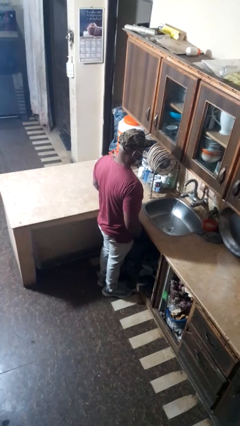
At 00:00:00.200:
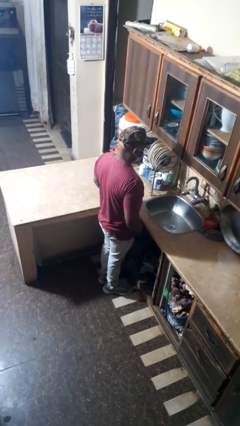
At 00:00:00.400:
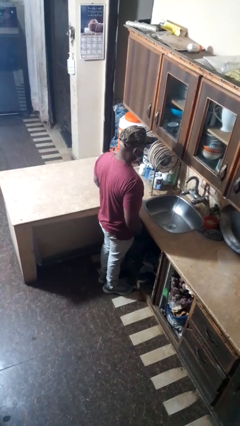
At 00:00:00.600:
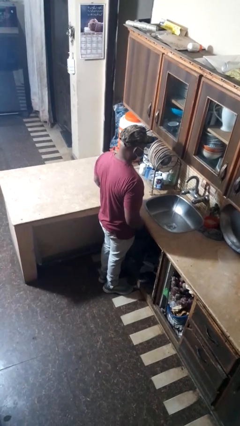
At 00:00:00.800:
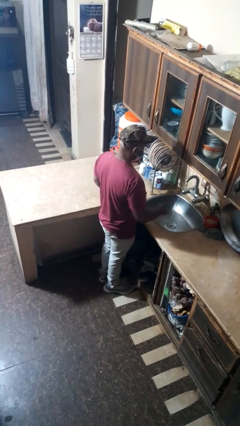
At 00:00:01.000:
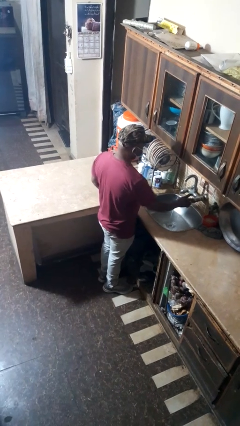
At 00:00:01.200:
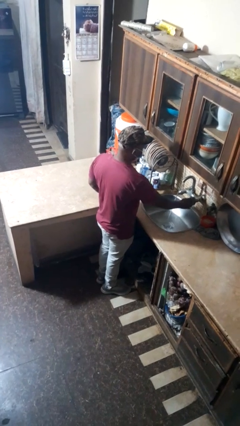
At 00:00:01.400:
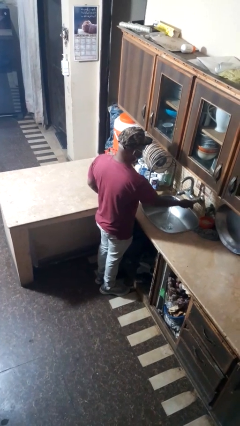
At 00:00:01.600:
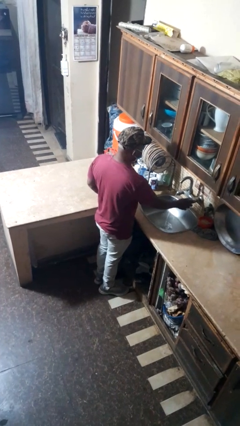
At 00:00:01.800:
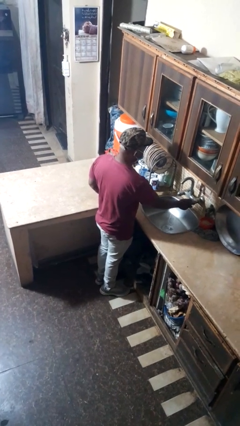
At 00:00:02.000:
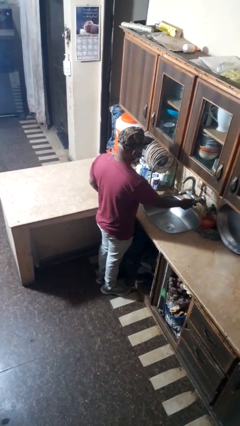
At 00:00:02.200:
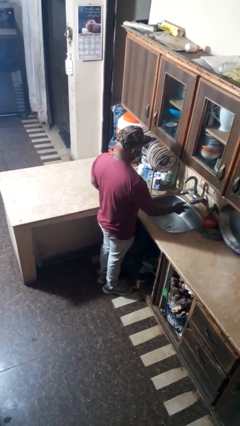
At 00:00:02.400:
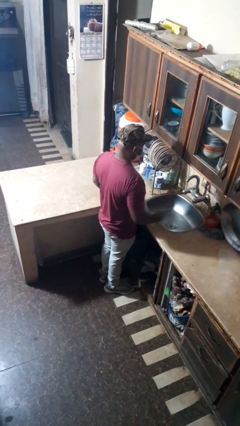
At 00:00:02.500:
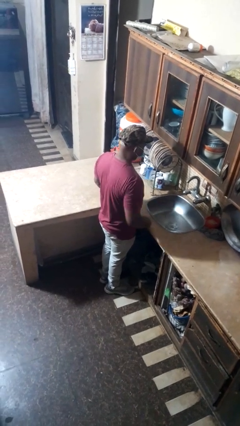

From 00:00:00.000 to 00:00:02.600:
person turns off faucet

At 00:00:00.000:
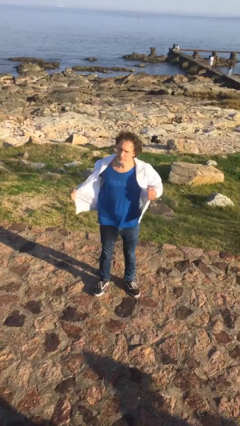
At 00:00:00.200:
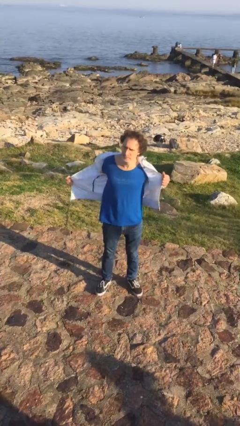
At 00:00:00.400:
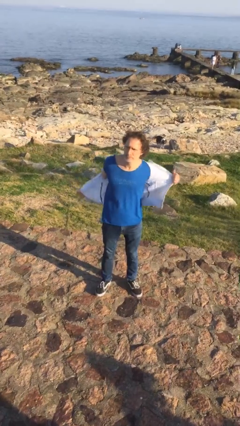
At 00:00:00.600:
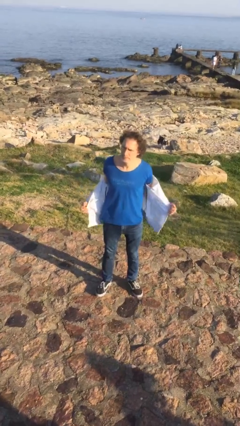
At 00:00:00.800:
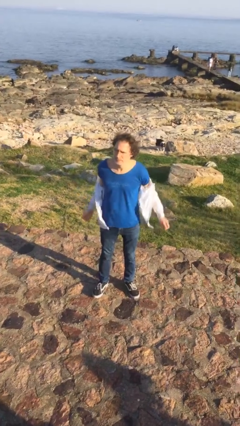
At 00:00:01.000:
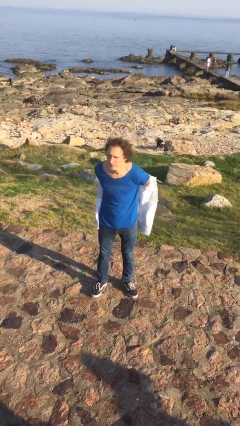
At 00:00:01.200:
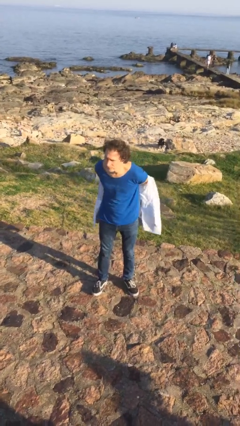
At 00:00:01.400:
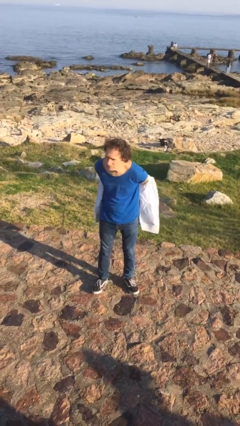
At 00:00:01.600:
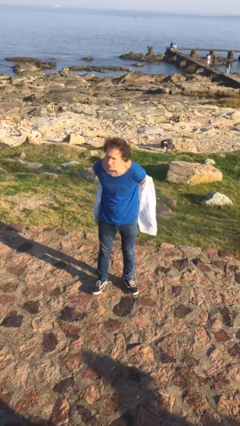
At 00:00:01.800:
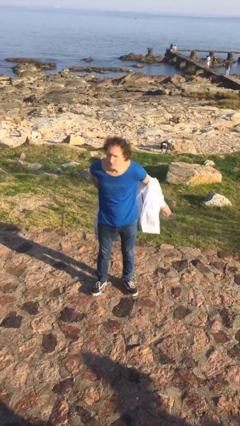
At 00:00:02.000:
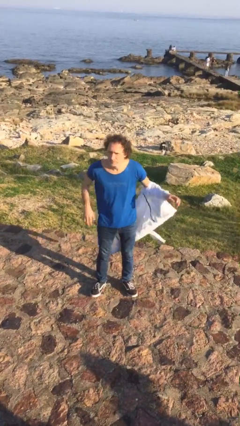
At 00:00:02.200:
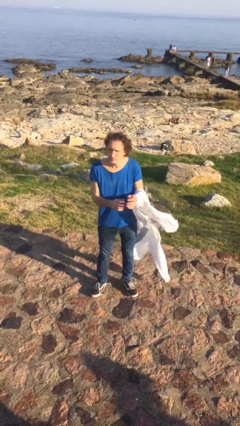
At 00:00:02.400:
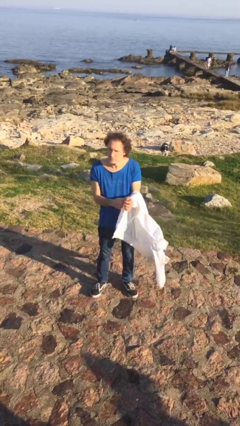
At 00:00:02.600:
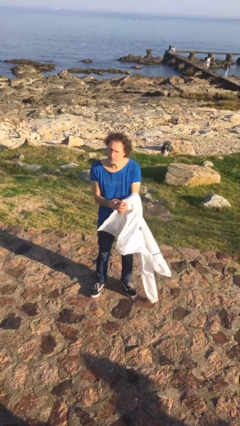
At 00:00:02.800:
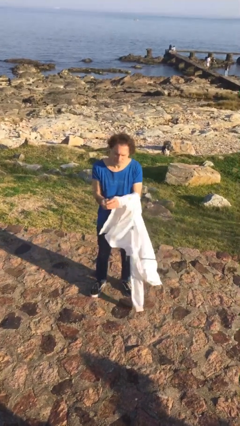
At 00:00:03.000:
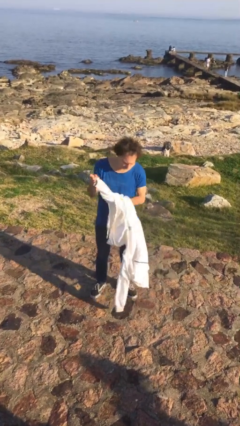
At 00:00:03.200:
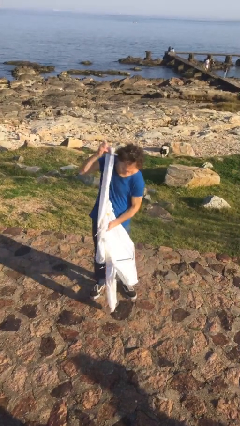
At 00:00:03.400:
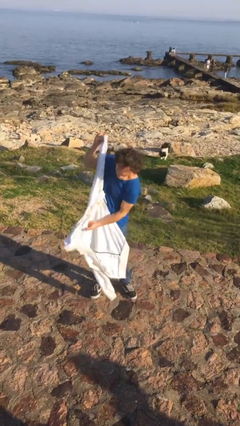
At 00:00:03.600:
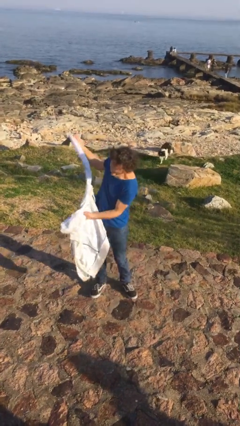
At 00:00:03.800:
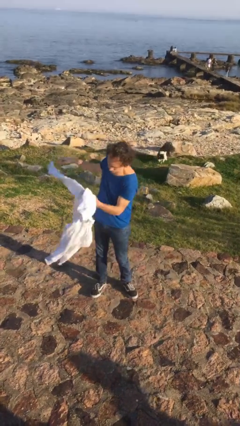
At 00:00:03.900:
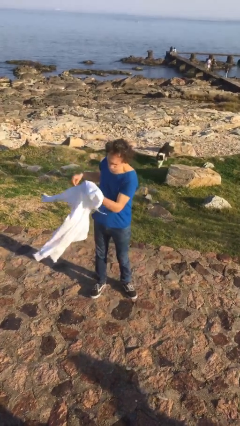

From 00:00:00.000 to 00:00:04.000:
person takes off jacket

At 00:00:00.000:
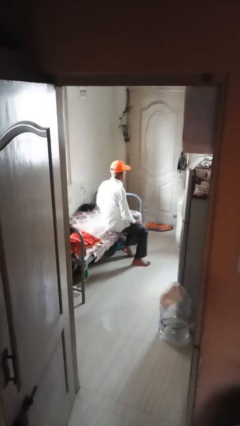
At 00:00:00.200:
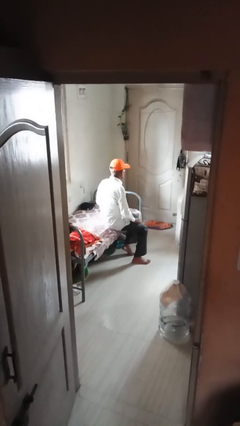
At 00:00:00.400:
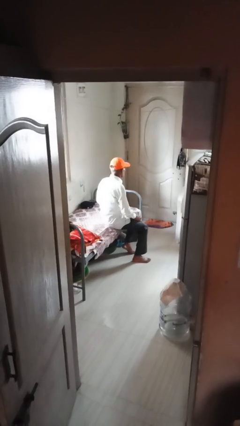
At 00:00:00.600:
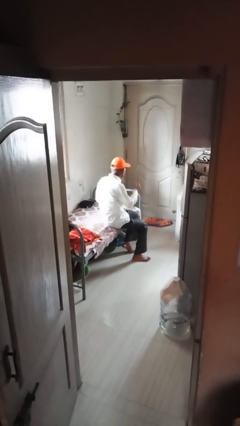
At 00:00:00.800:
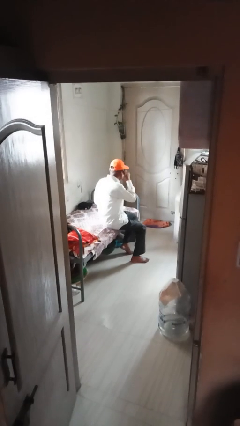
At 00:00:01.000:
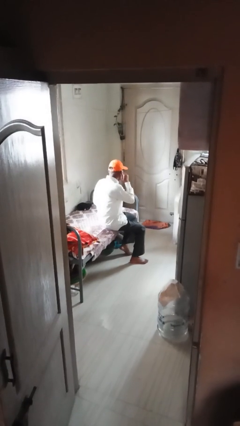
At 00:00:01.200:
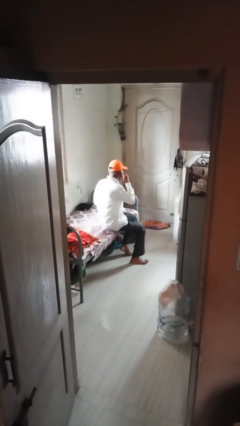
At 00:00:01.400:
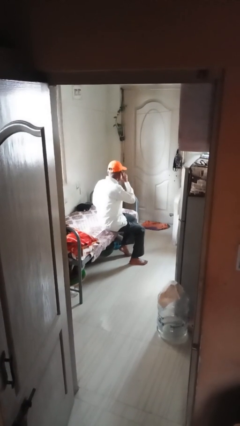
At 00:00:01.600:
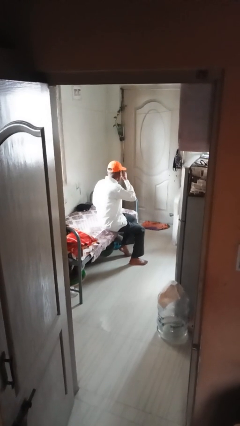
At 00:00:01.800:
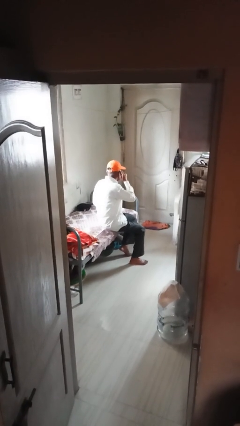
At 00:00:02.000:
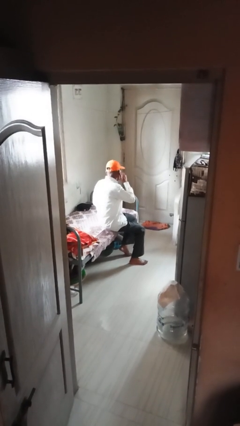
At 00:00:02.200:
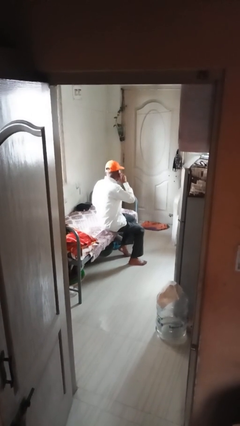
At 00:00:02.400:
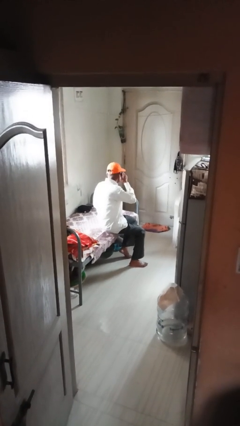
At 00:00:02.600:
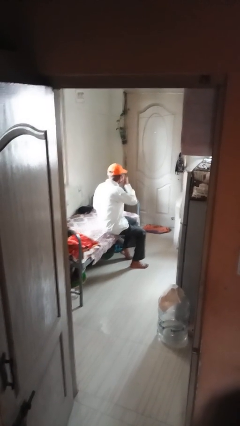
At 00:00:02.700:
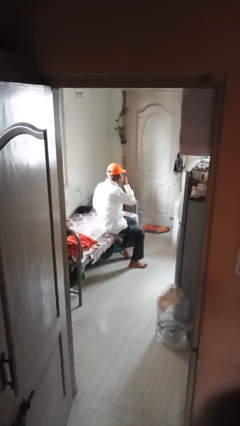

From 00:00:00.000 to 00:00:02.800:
person touches earlobe

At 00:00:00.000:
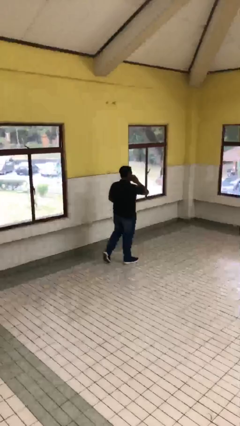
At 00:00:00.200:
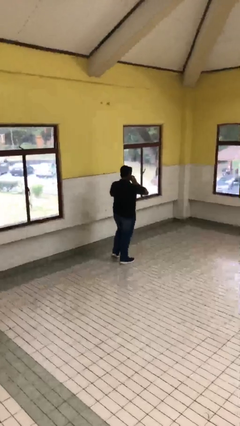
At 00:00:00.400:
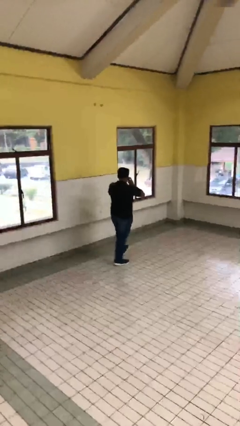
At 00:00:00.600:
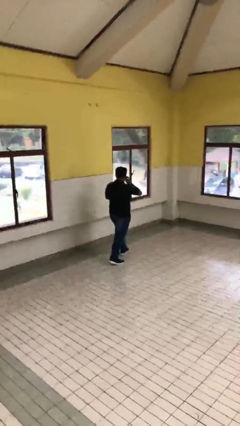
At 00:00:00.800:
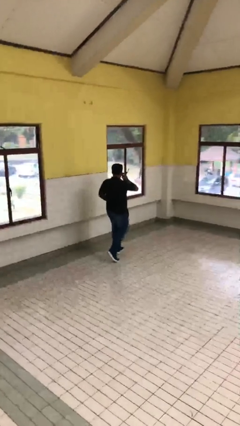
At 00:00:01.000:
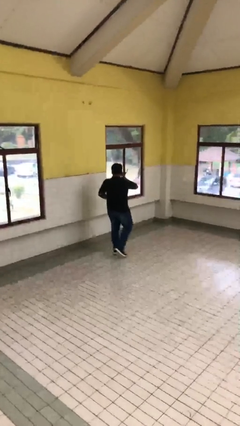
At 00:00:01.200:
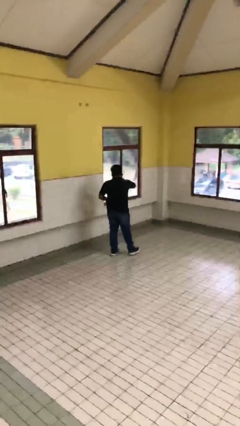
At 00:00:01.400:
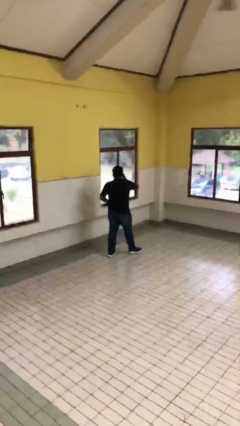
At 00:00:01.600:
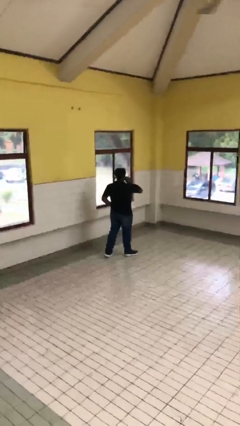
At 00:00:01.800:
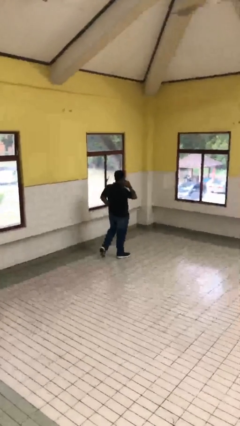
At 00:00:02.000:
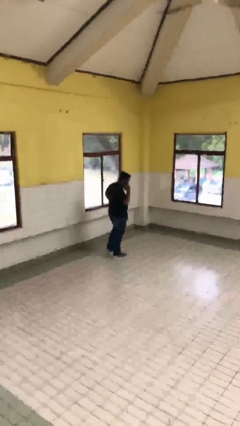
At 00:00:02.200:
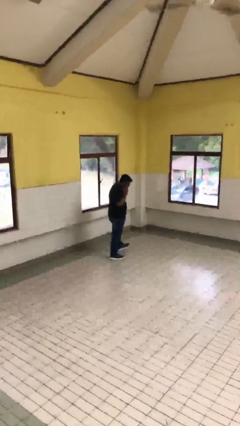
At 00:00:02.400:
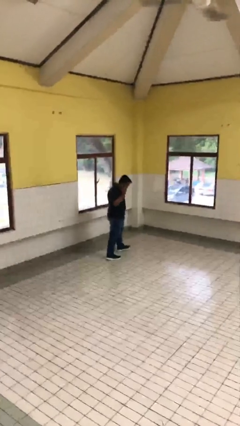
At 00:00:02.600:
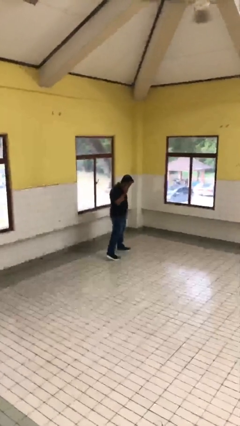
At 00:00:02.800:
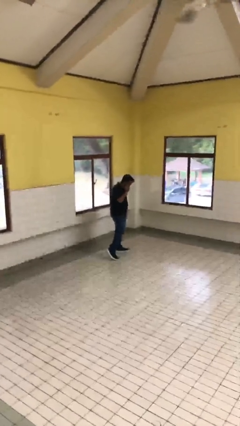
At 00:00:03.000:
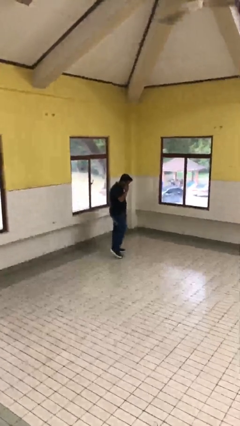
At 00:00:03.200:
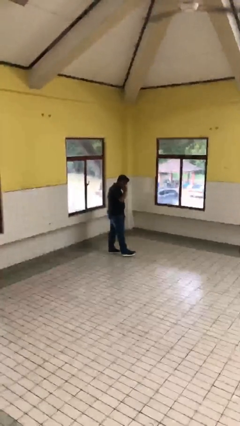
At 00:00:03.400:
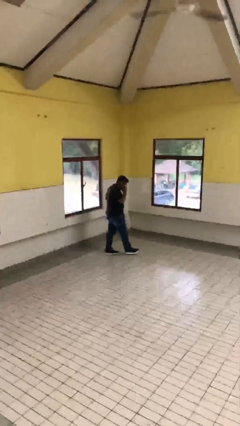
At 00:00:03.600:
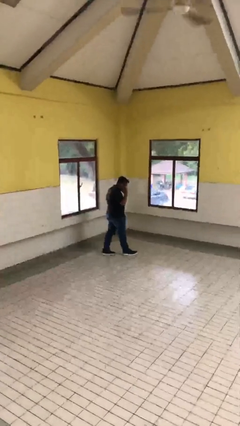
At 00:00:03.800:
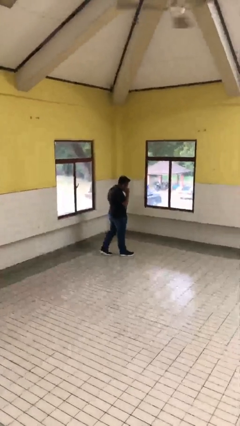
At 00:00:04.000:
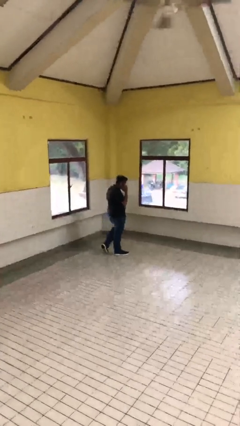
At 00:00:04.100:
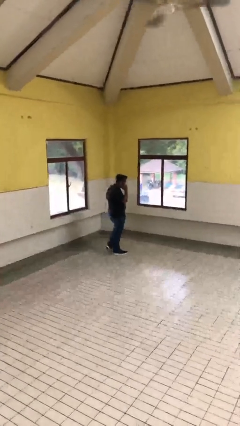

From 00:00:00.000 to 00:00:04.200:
person talks on phone

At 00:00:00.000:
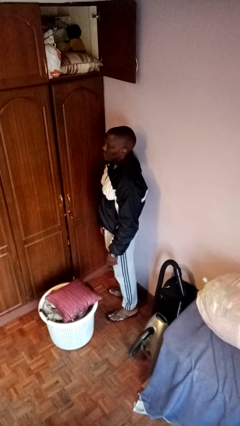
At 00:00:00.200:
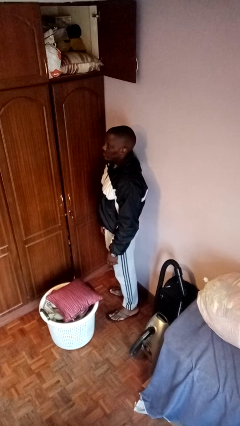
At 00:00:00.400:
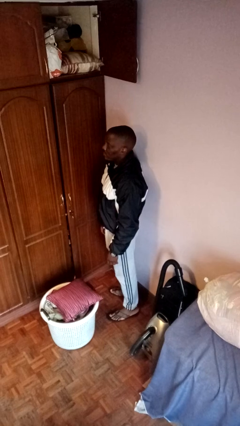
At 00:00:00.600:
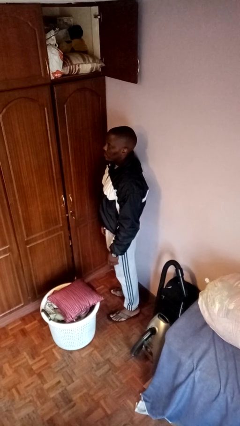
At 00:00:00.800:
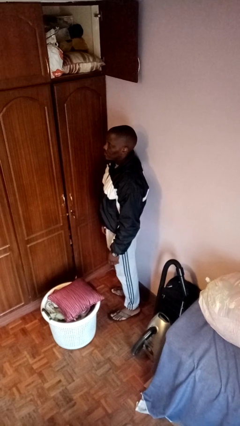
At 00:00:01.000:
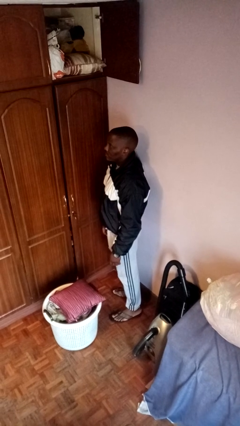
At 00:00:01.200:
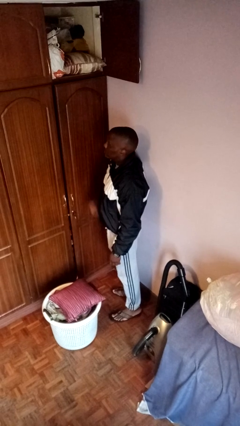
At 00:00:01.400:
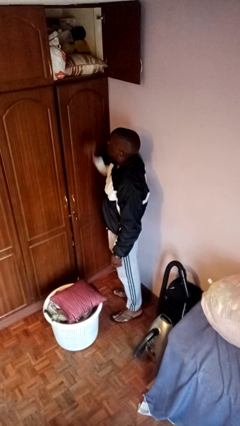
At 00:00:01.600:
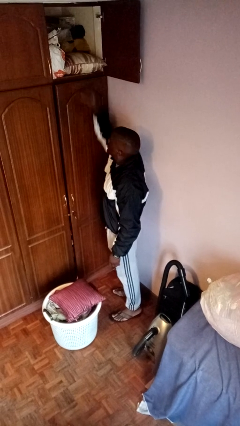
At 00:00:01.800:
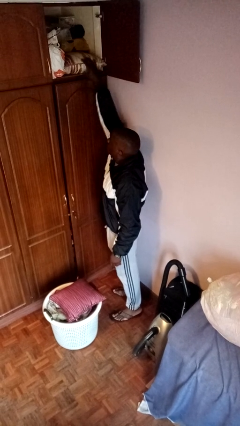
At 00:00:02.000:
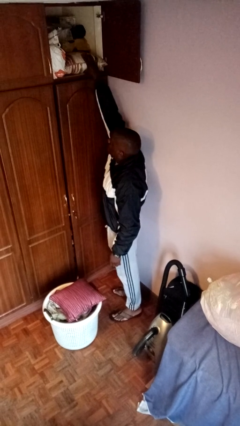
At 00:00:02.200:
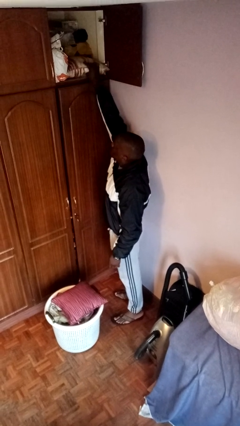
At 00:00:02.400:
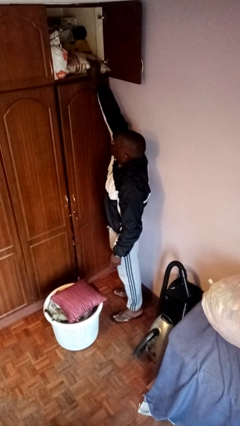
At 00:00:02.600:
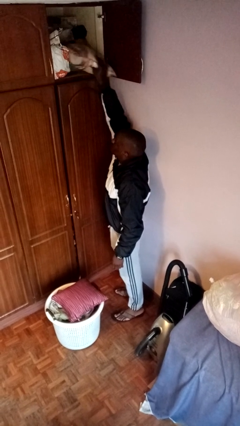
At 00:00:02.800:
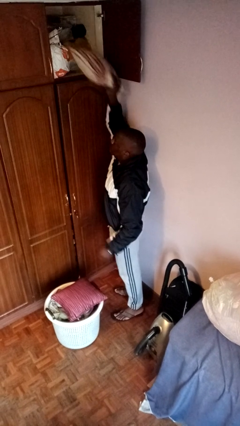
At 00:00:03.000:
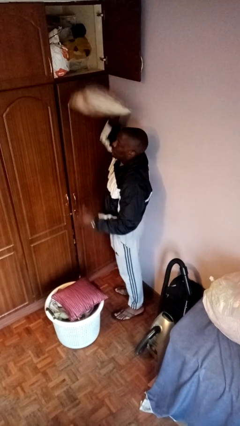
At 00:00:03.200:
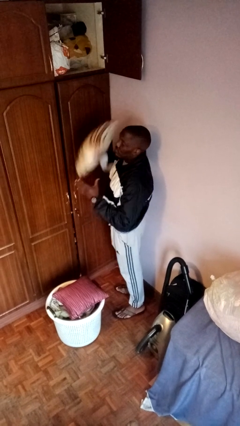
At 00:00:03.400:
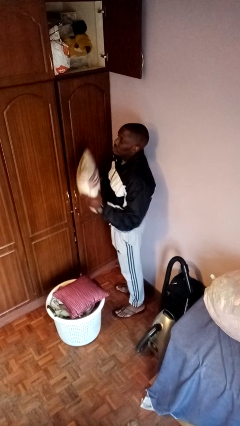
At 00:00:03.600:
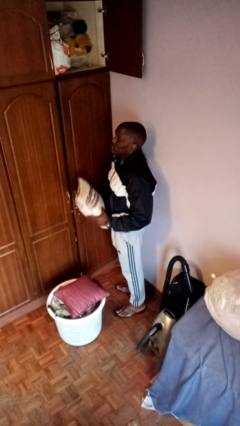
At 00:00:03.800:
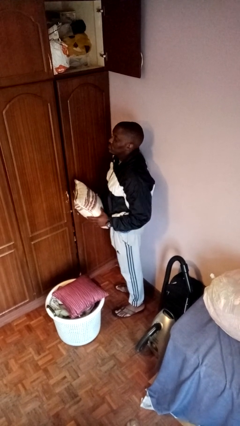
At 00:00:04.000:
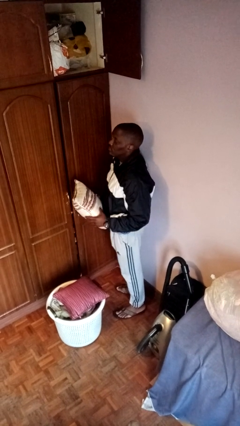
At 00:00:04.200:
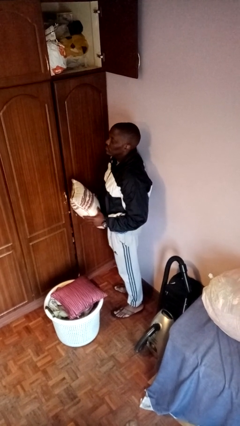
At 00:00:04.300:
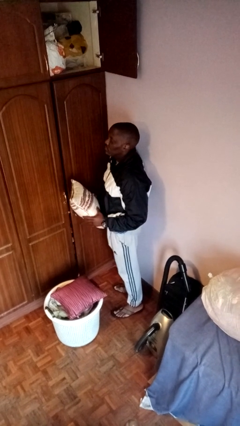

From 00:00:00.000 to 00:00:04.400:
person picks up object from shelf
